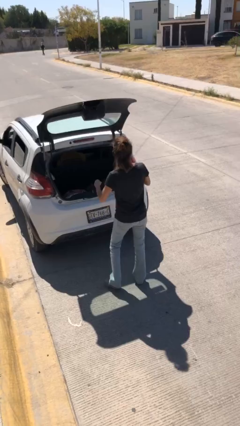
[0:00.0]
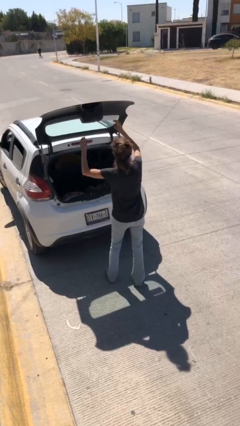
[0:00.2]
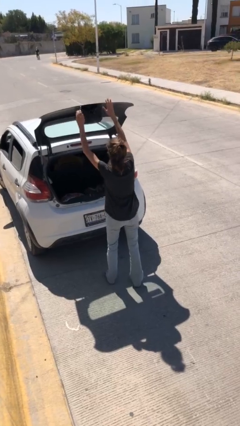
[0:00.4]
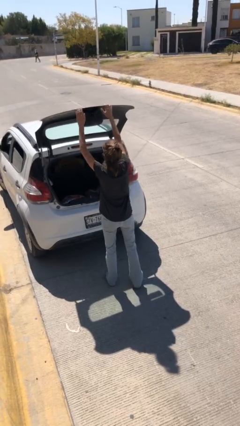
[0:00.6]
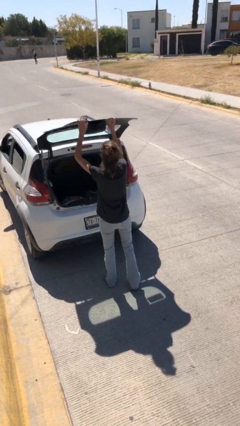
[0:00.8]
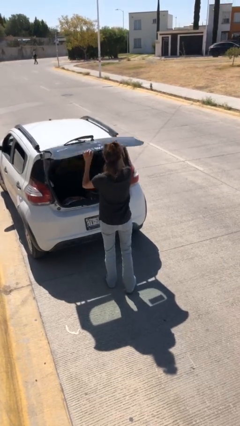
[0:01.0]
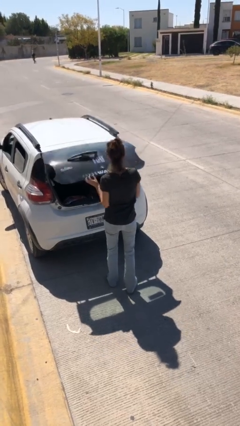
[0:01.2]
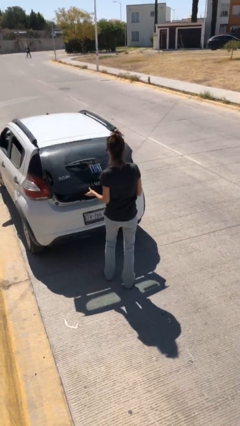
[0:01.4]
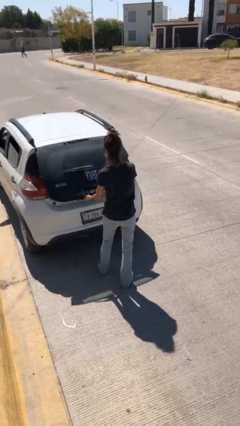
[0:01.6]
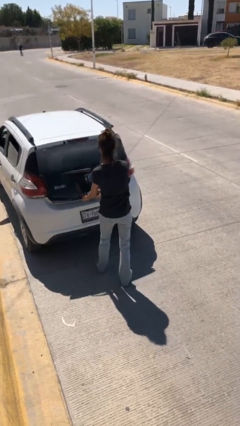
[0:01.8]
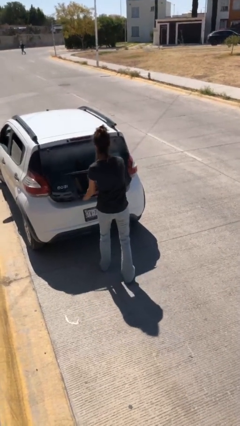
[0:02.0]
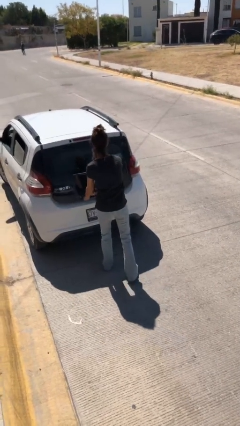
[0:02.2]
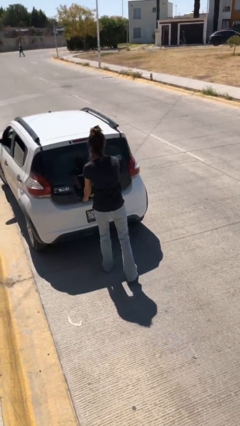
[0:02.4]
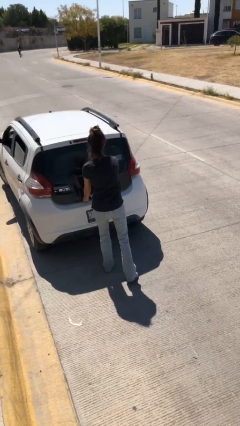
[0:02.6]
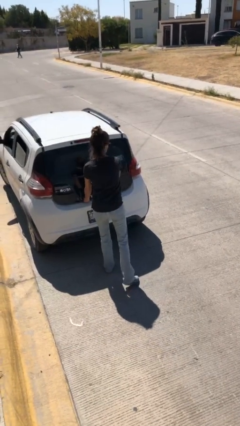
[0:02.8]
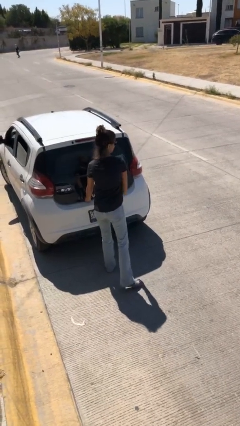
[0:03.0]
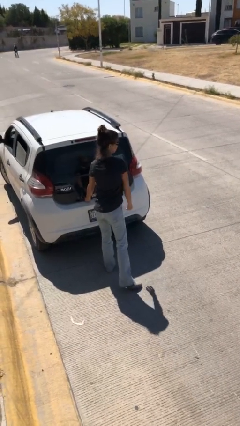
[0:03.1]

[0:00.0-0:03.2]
person closes car trunk

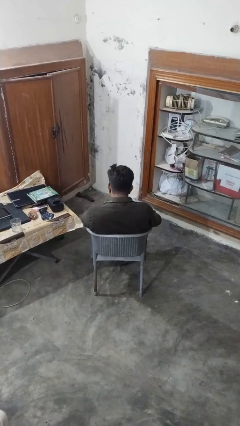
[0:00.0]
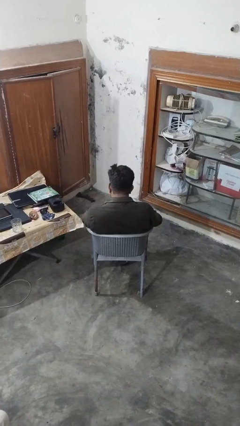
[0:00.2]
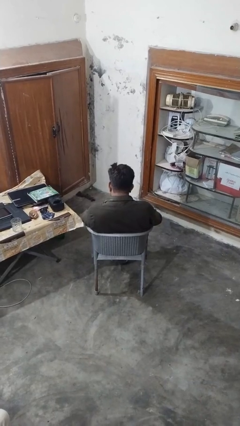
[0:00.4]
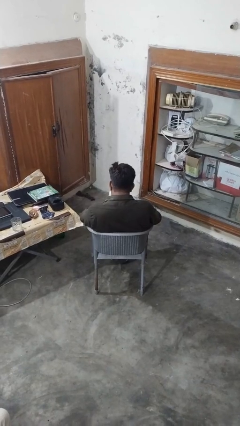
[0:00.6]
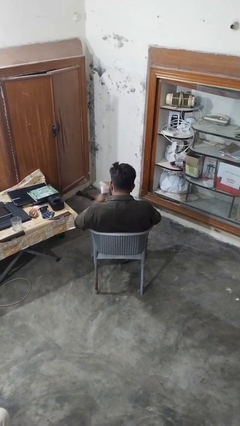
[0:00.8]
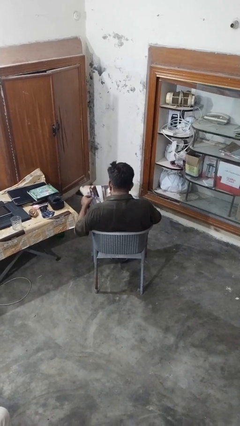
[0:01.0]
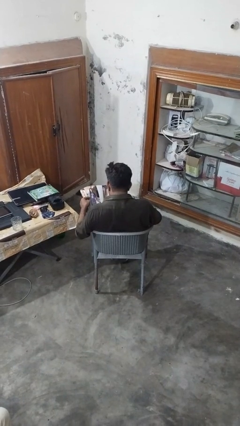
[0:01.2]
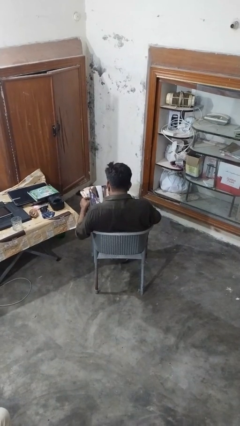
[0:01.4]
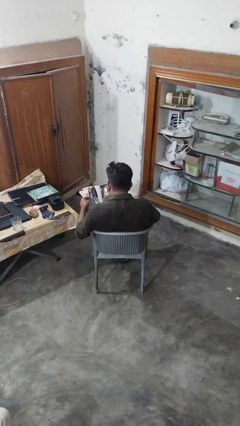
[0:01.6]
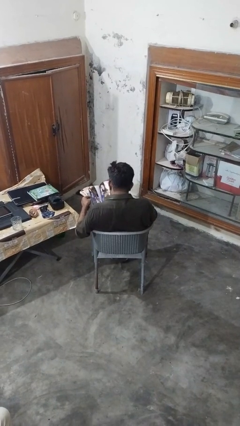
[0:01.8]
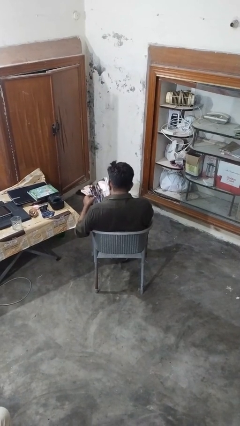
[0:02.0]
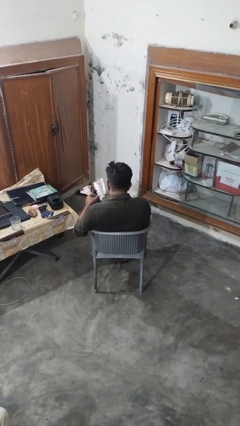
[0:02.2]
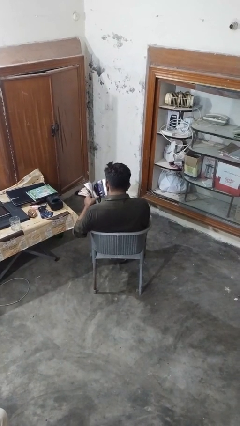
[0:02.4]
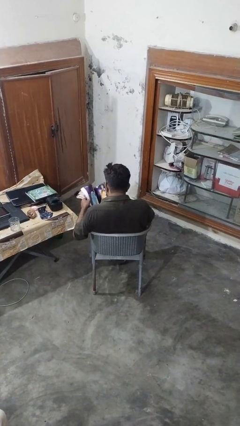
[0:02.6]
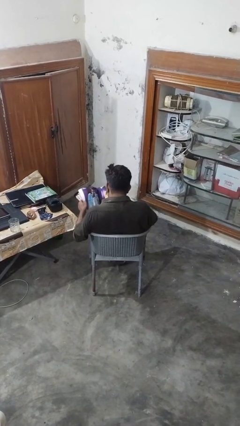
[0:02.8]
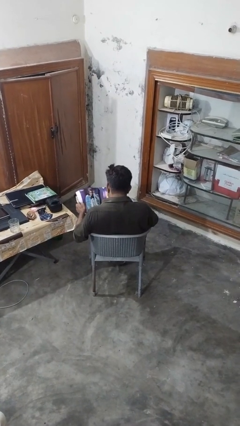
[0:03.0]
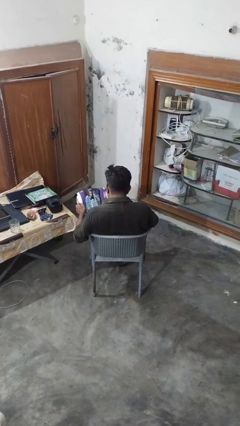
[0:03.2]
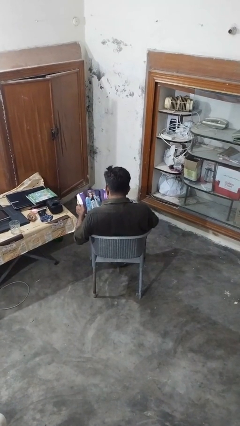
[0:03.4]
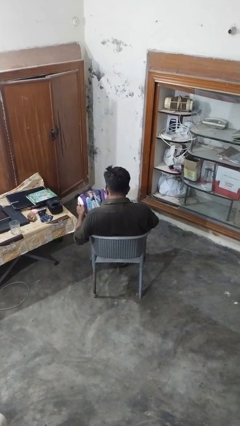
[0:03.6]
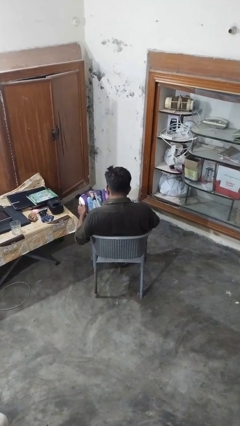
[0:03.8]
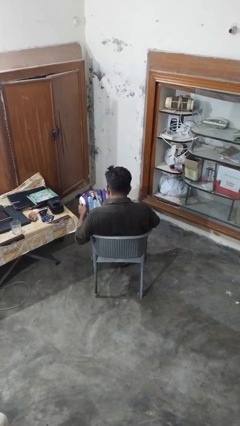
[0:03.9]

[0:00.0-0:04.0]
person reads magazine

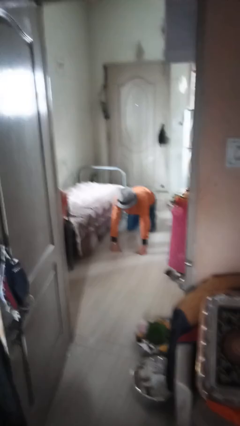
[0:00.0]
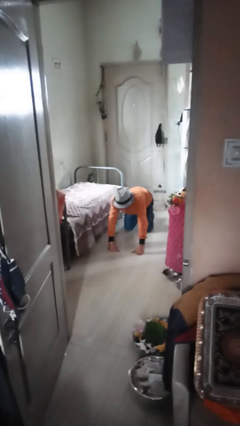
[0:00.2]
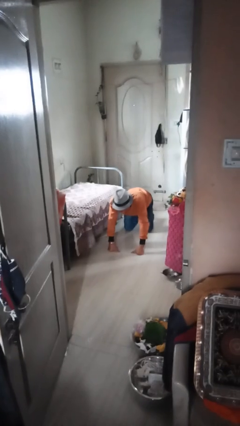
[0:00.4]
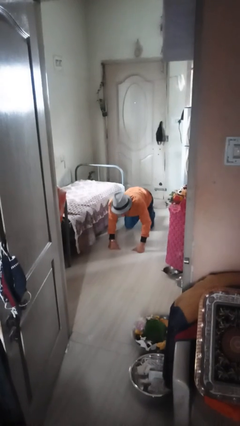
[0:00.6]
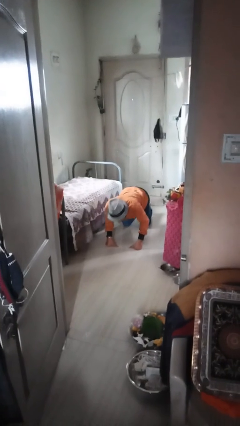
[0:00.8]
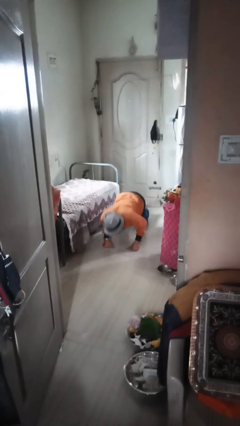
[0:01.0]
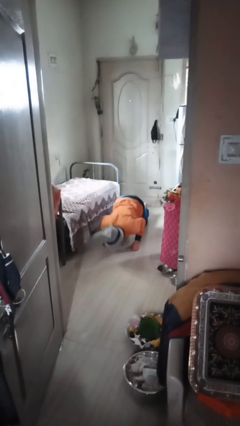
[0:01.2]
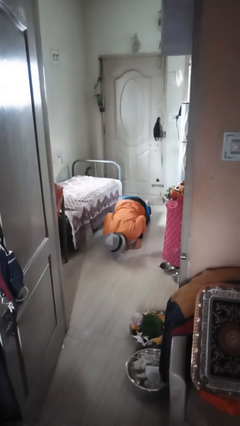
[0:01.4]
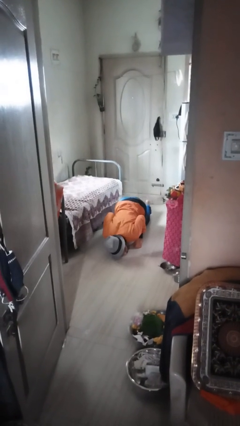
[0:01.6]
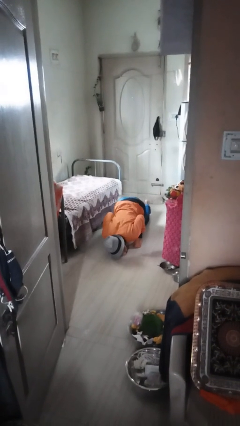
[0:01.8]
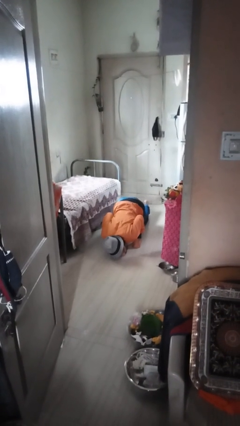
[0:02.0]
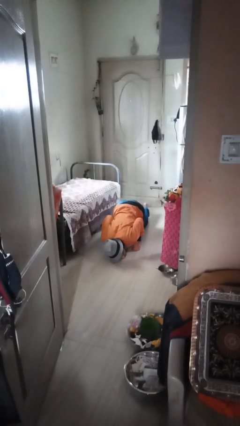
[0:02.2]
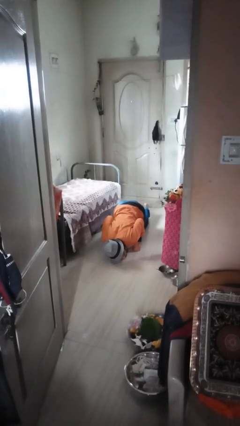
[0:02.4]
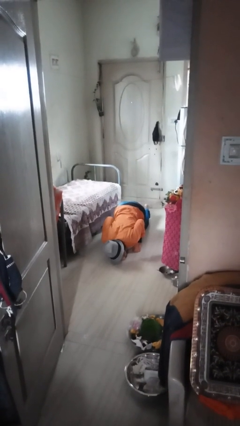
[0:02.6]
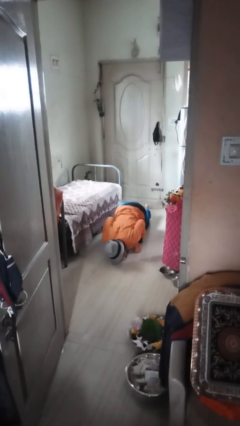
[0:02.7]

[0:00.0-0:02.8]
person exercises with pushup

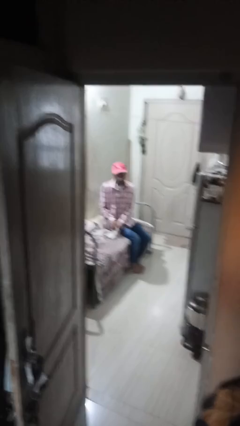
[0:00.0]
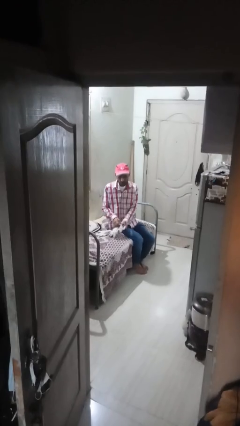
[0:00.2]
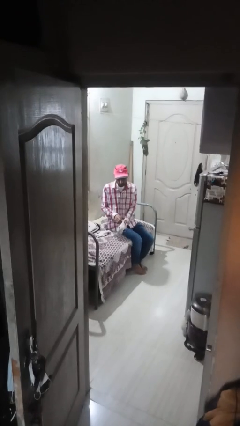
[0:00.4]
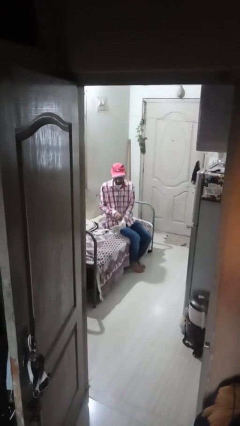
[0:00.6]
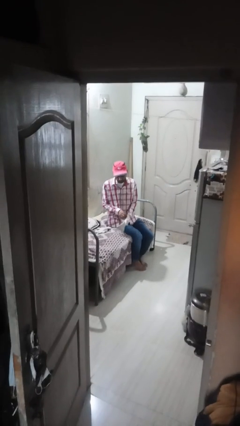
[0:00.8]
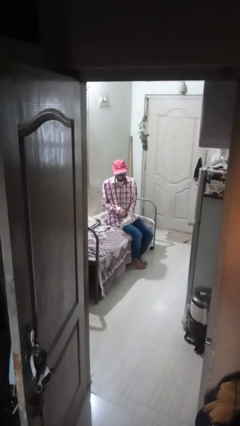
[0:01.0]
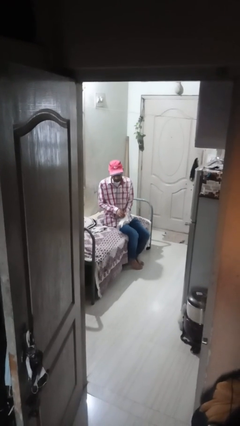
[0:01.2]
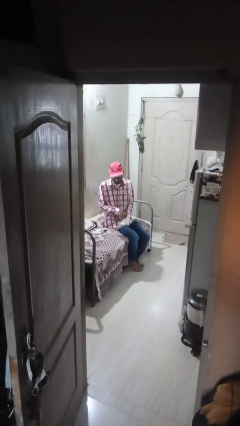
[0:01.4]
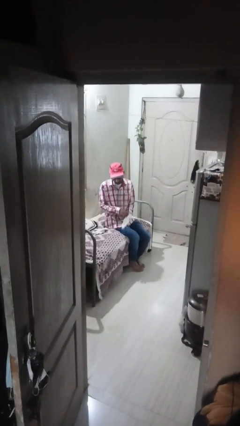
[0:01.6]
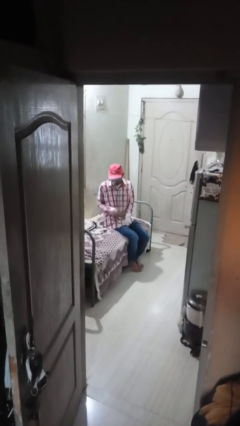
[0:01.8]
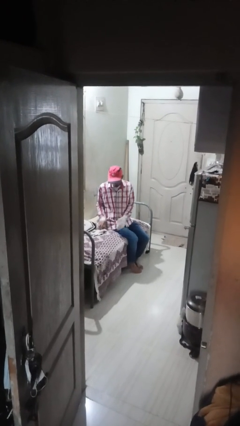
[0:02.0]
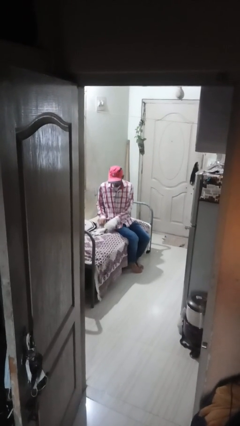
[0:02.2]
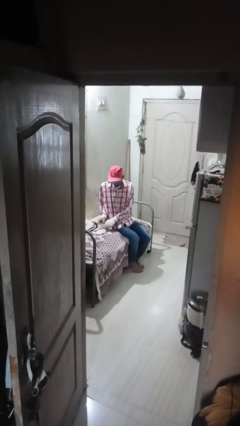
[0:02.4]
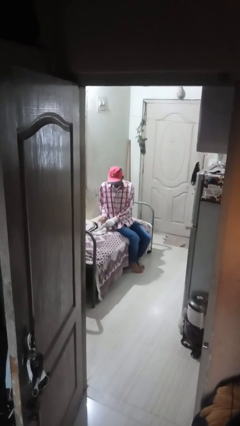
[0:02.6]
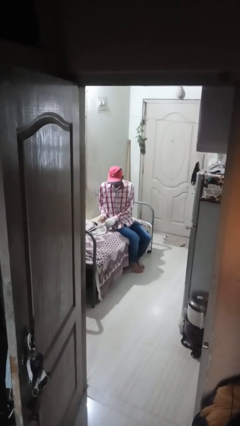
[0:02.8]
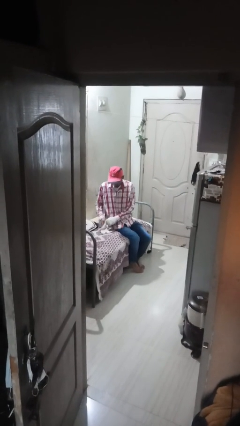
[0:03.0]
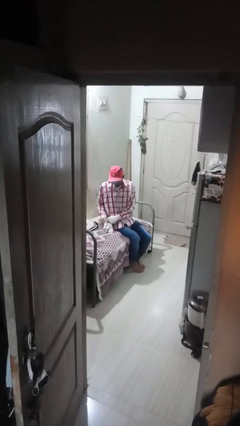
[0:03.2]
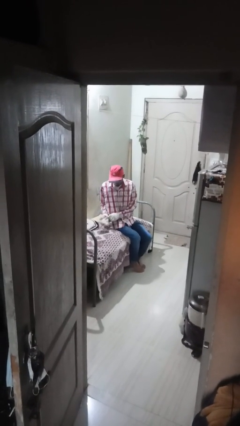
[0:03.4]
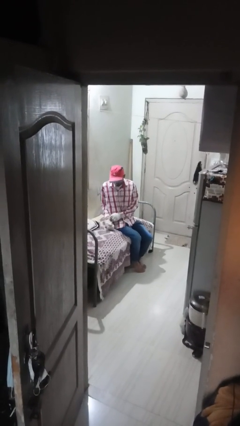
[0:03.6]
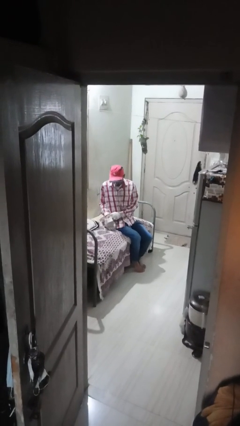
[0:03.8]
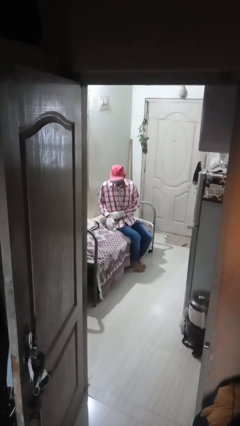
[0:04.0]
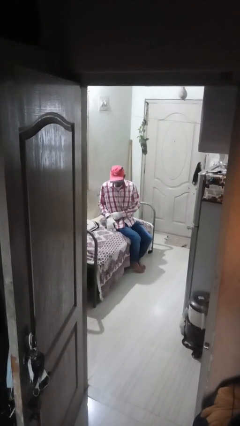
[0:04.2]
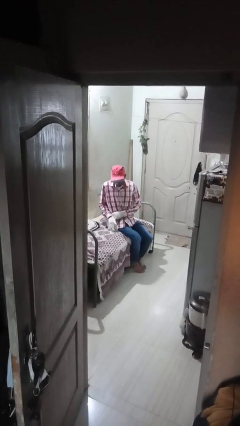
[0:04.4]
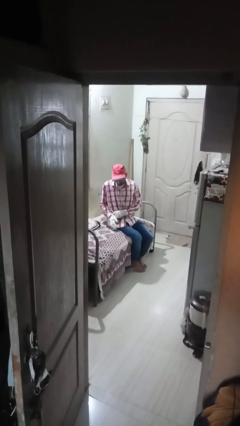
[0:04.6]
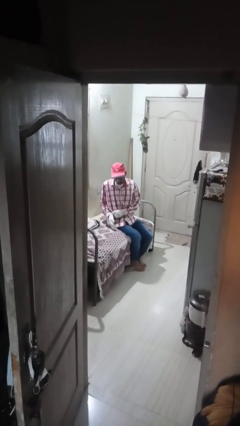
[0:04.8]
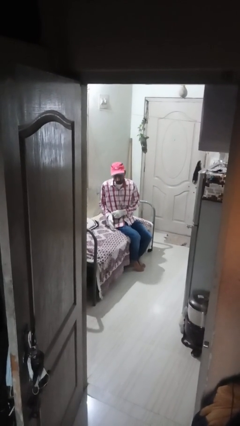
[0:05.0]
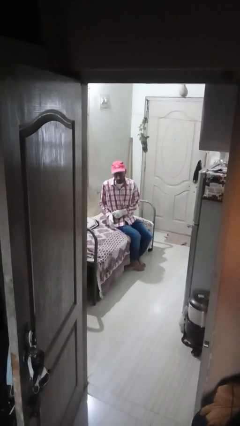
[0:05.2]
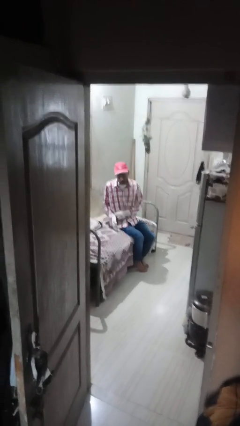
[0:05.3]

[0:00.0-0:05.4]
person puts on gloves

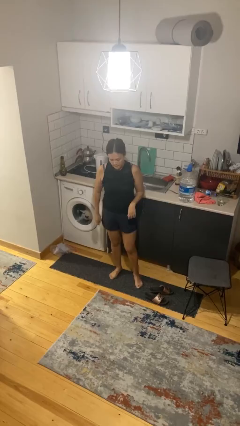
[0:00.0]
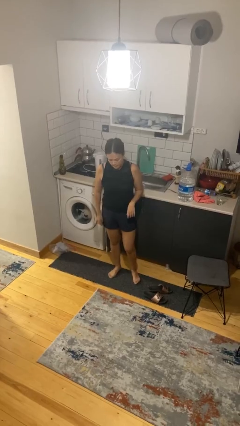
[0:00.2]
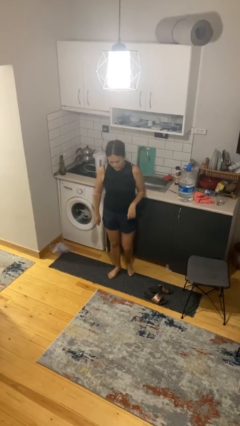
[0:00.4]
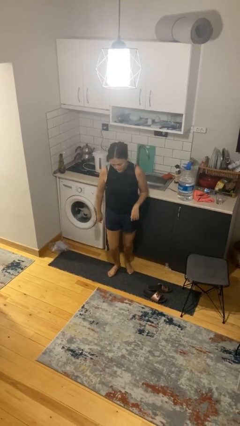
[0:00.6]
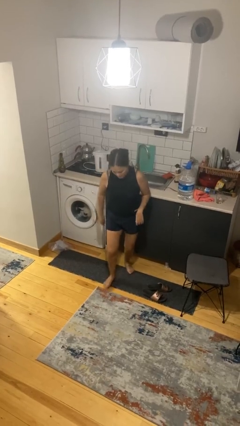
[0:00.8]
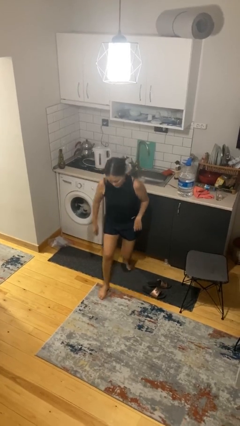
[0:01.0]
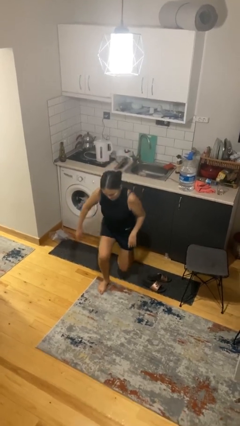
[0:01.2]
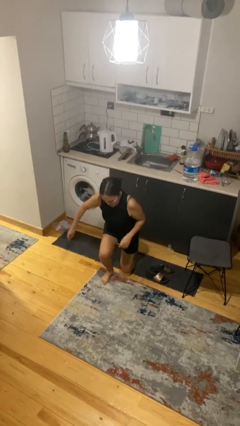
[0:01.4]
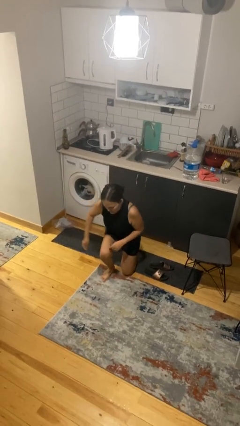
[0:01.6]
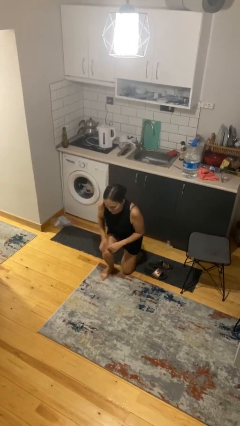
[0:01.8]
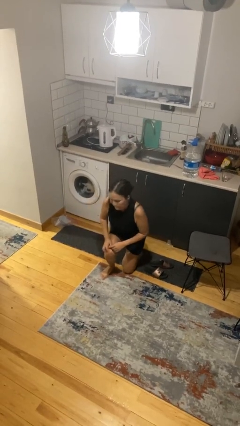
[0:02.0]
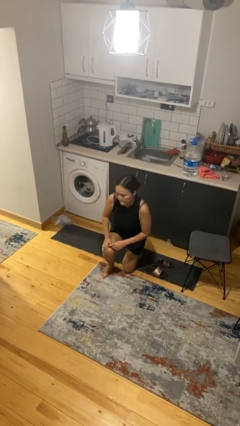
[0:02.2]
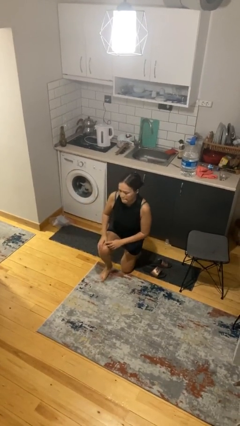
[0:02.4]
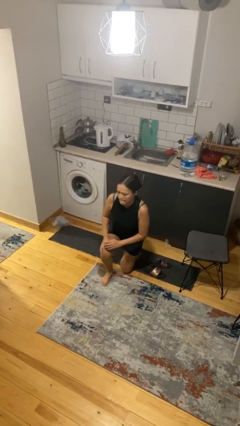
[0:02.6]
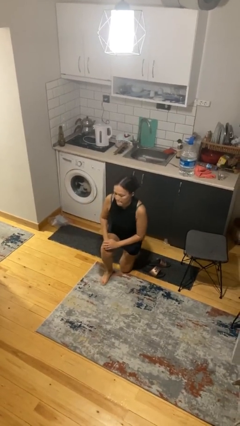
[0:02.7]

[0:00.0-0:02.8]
person kneels
